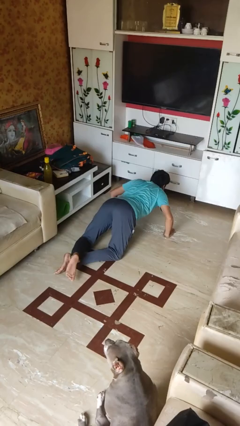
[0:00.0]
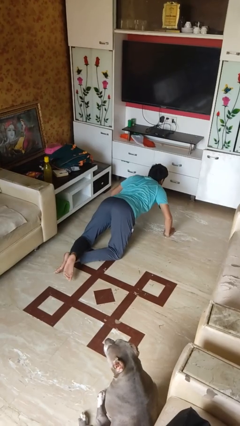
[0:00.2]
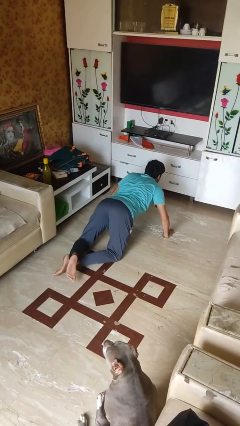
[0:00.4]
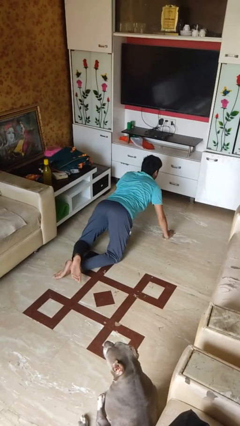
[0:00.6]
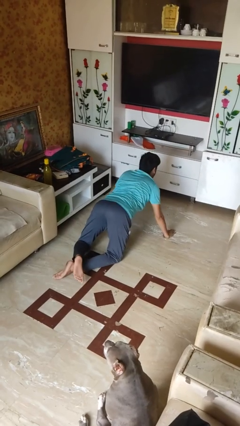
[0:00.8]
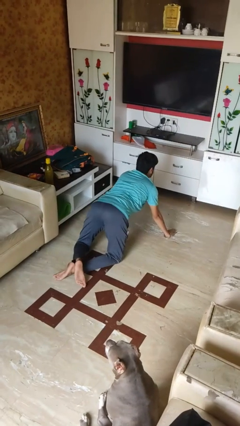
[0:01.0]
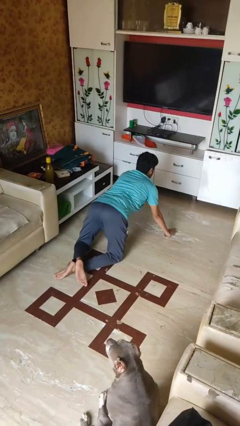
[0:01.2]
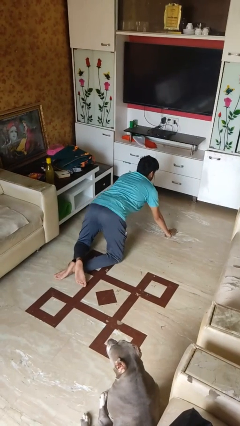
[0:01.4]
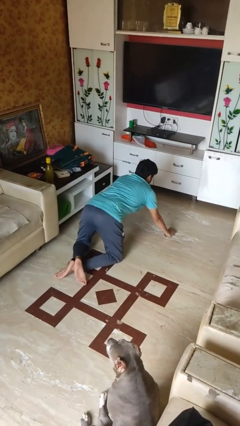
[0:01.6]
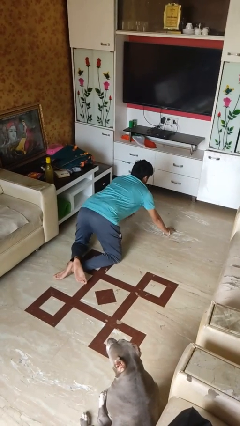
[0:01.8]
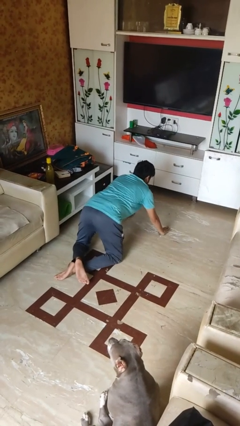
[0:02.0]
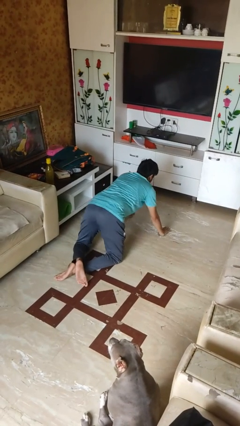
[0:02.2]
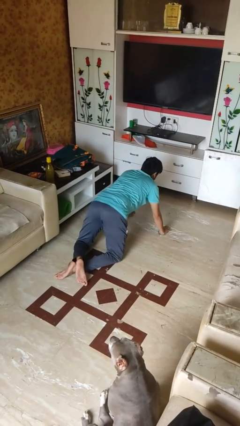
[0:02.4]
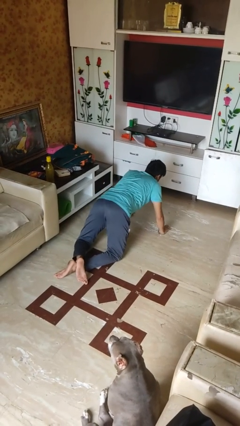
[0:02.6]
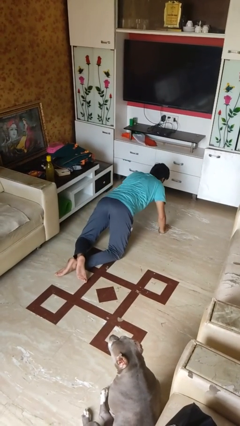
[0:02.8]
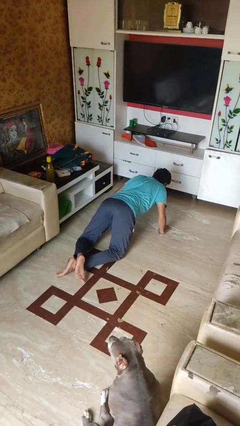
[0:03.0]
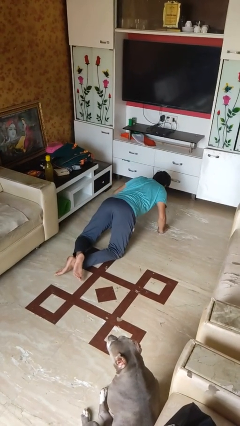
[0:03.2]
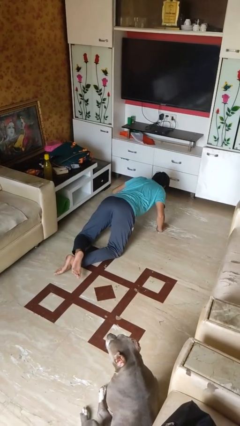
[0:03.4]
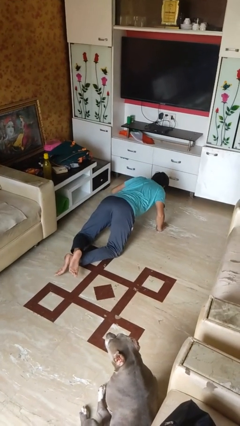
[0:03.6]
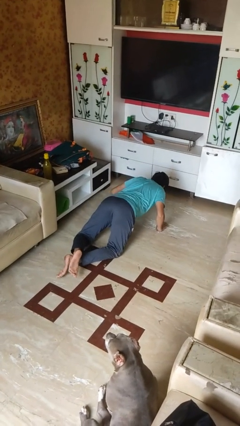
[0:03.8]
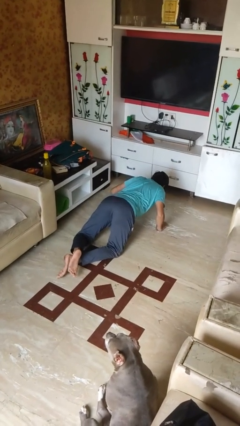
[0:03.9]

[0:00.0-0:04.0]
person exercises with pushup

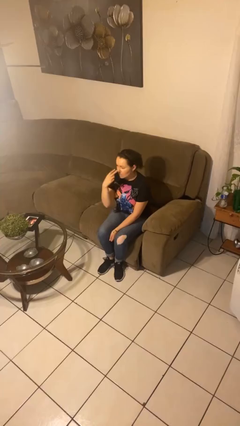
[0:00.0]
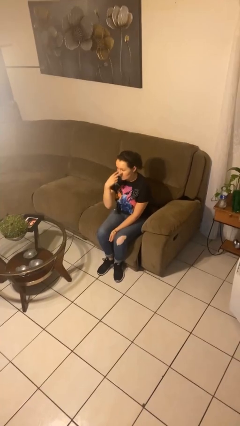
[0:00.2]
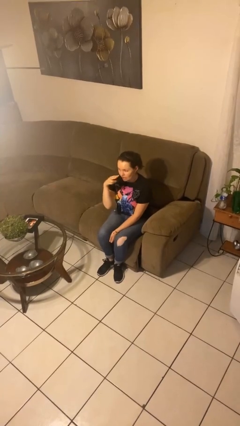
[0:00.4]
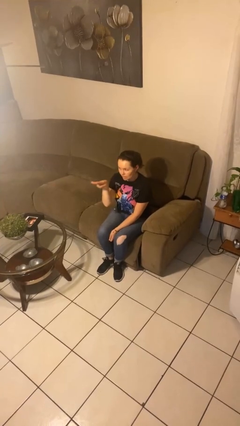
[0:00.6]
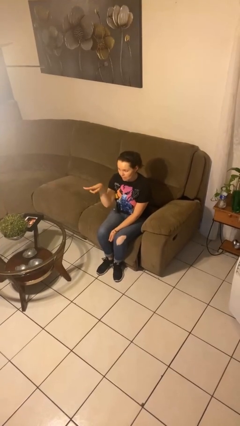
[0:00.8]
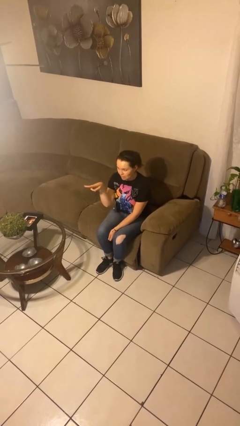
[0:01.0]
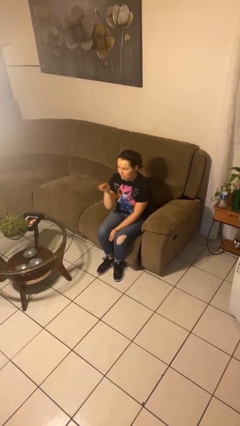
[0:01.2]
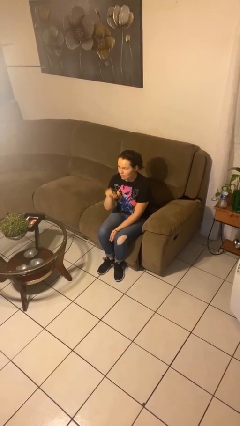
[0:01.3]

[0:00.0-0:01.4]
person gestures watch closely

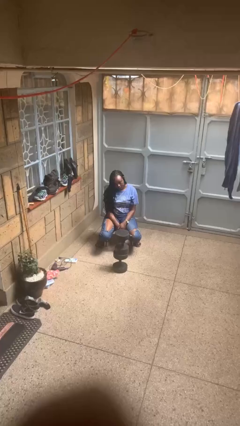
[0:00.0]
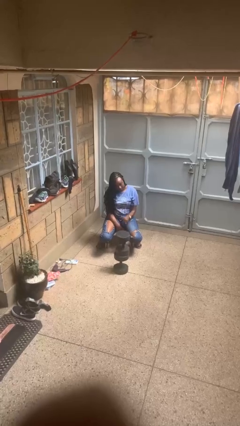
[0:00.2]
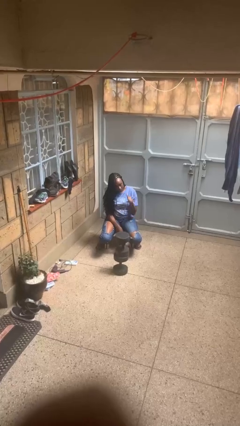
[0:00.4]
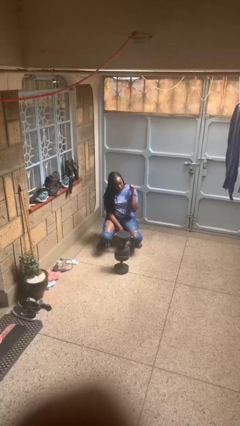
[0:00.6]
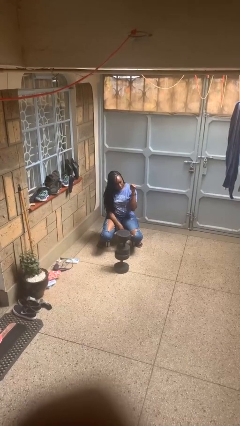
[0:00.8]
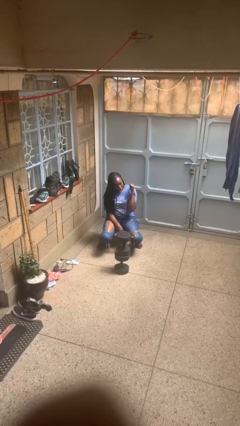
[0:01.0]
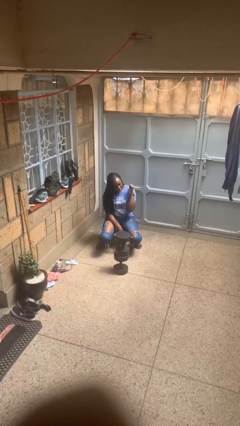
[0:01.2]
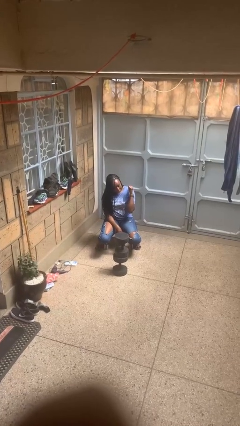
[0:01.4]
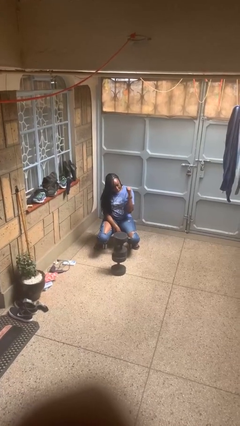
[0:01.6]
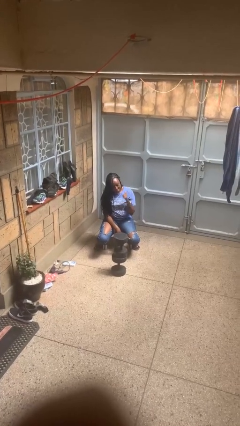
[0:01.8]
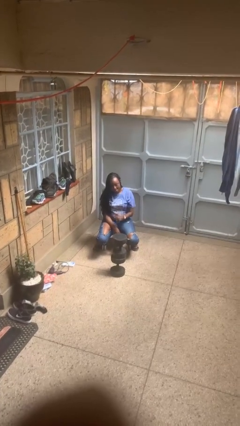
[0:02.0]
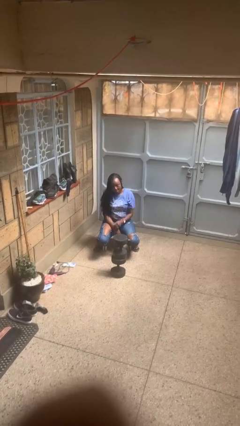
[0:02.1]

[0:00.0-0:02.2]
person gestures behind me

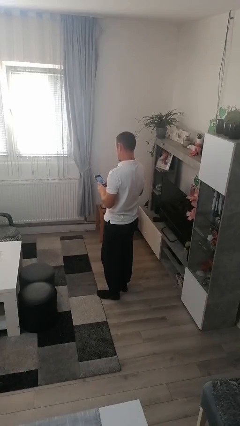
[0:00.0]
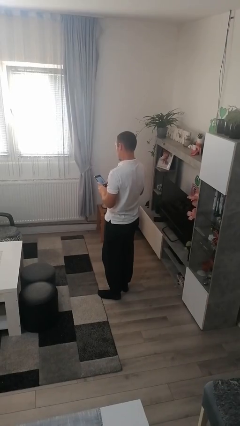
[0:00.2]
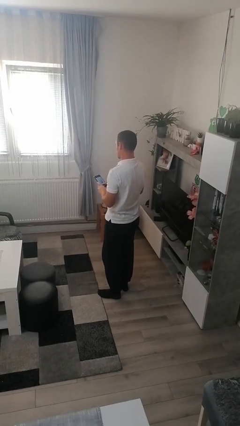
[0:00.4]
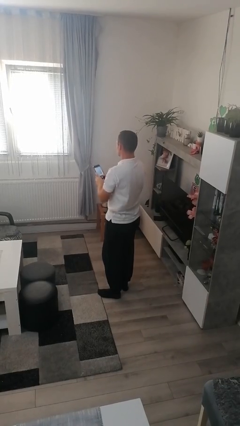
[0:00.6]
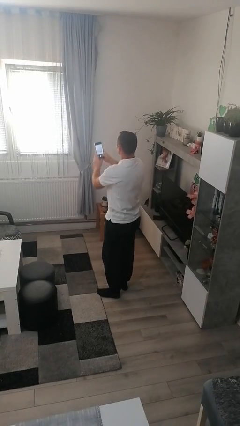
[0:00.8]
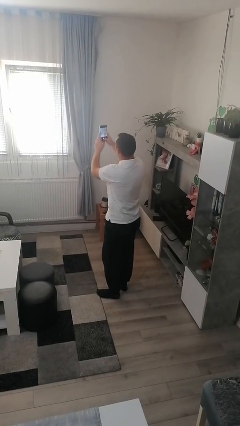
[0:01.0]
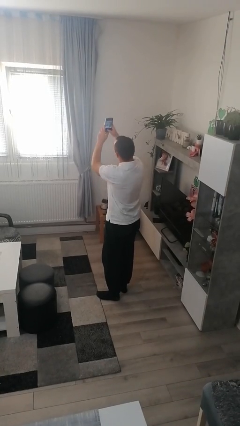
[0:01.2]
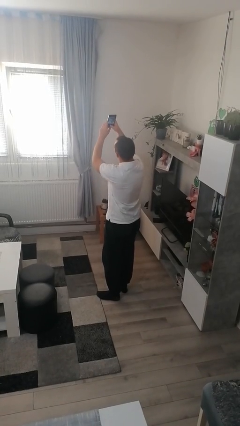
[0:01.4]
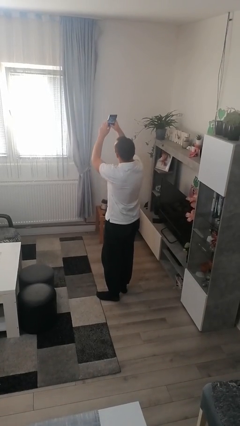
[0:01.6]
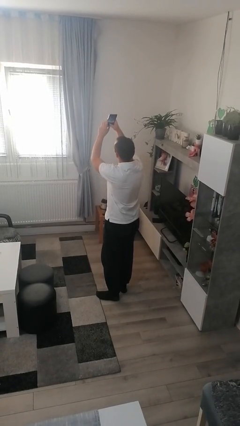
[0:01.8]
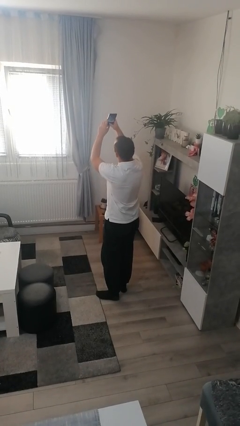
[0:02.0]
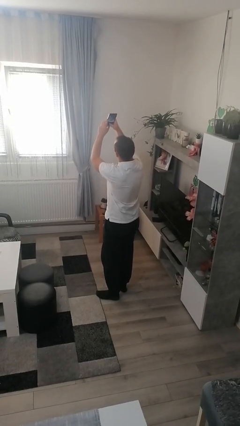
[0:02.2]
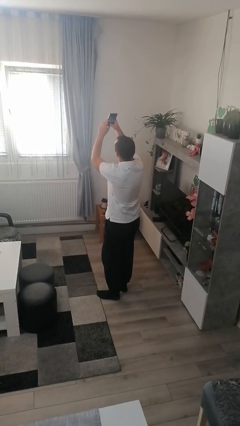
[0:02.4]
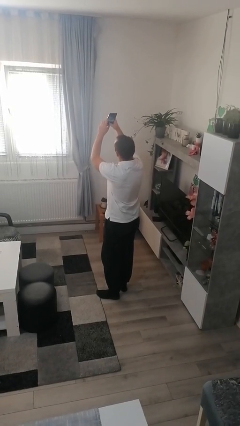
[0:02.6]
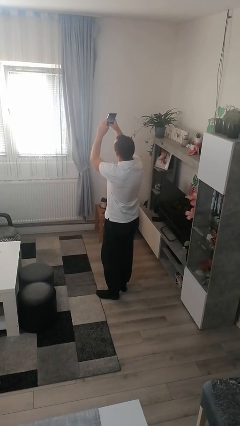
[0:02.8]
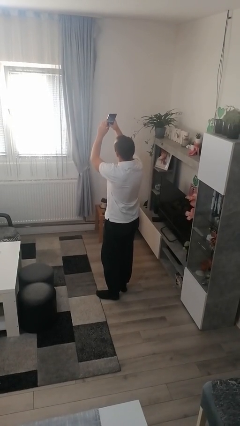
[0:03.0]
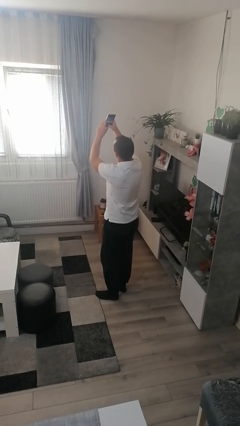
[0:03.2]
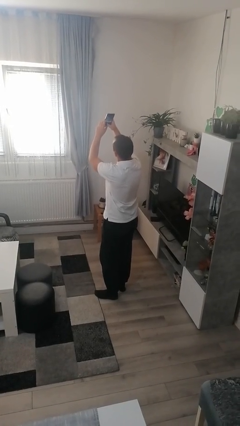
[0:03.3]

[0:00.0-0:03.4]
person takes selfie

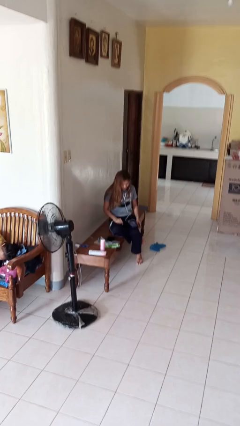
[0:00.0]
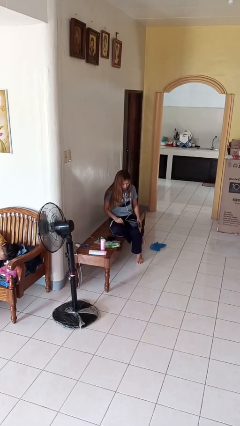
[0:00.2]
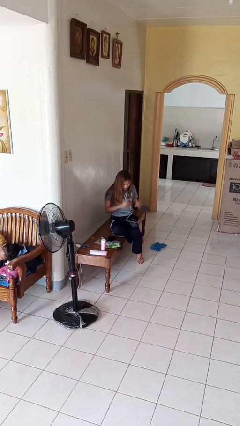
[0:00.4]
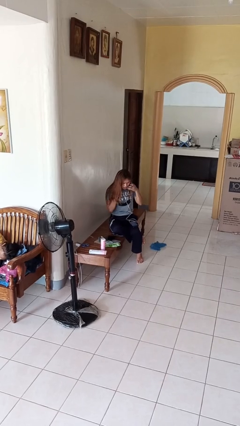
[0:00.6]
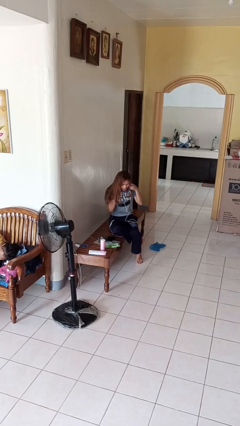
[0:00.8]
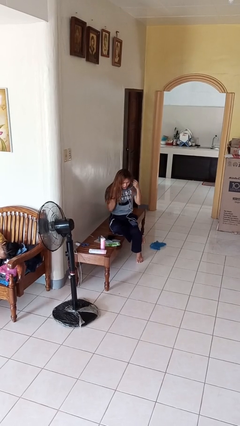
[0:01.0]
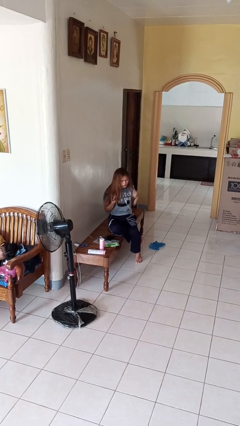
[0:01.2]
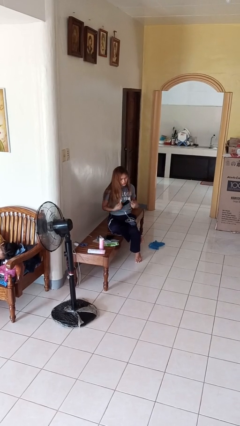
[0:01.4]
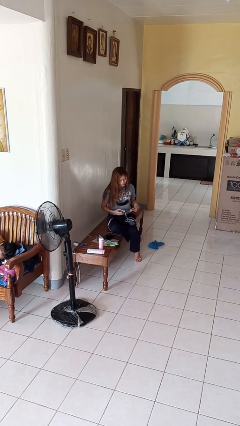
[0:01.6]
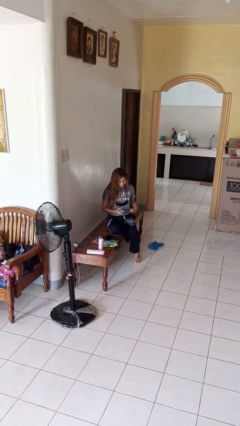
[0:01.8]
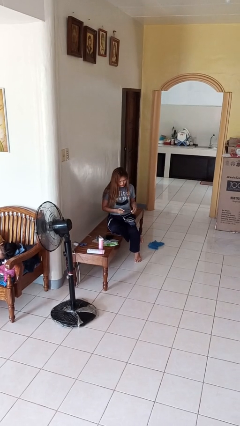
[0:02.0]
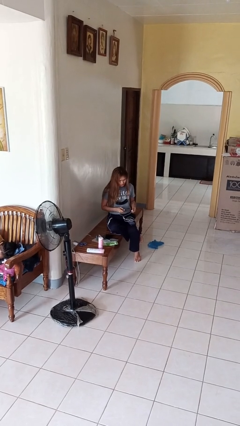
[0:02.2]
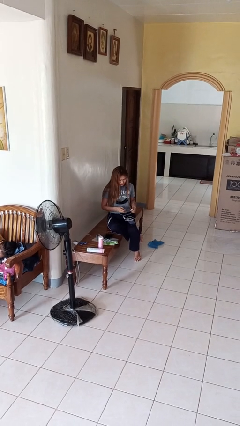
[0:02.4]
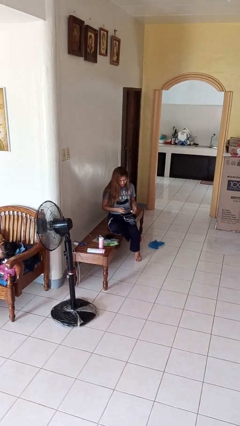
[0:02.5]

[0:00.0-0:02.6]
person takes off headphones

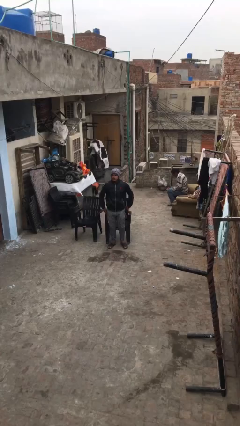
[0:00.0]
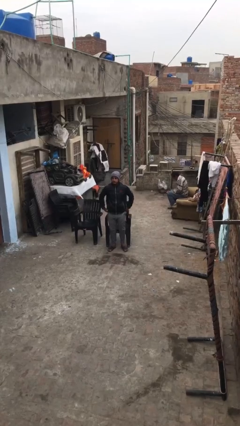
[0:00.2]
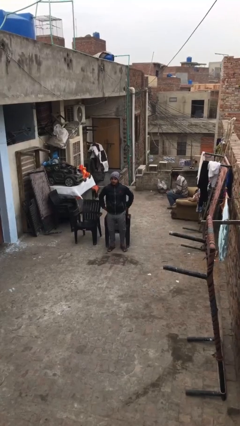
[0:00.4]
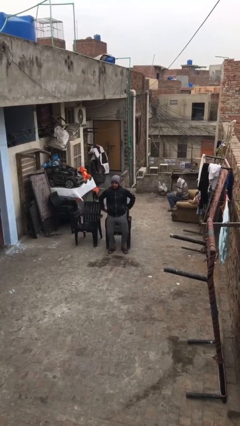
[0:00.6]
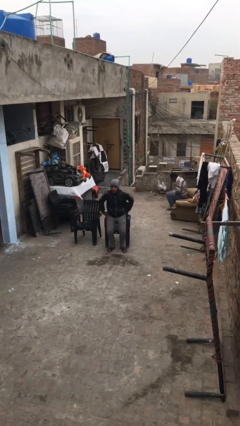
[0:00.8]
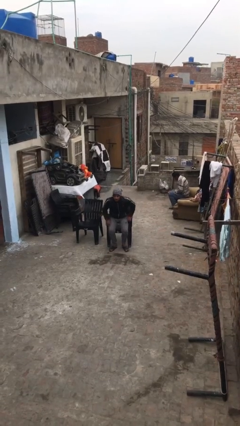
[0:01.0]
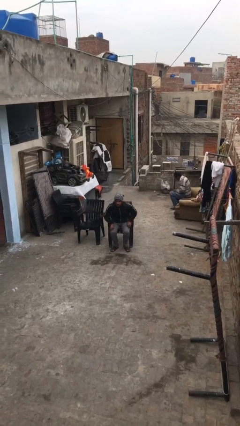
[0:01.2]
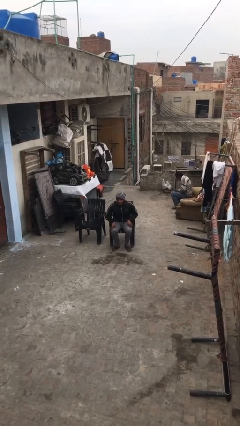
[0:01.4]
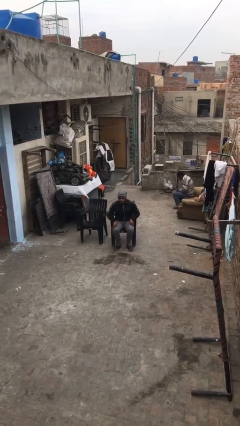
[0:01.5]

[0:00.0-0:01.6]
person sits down

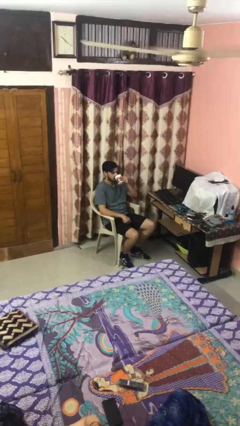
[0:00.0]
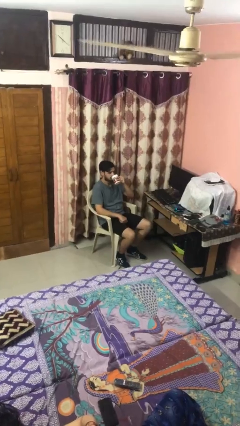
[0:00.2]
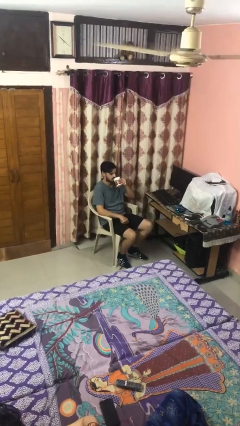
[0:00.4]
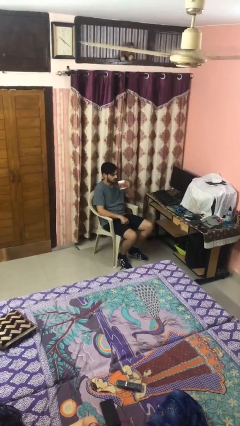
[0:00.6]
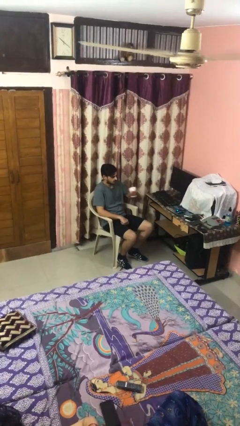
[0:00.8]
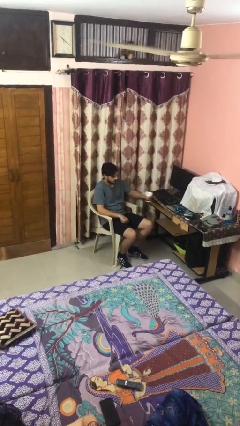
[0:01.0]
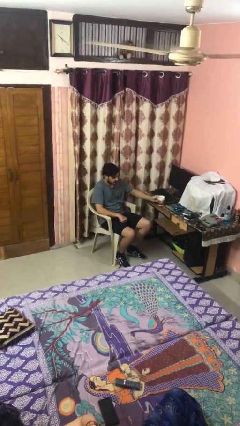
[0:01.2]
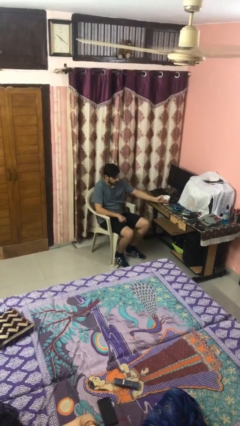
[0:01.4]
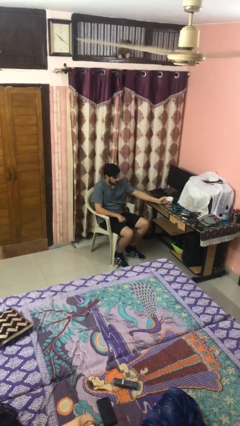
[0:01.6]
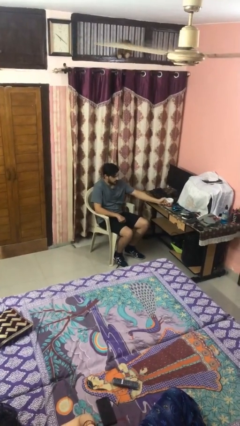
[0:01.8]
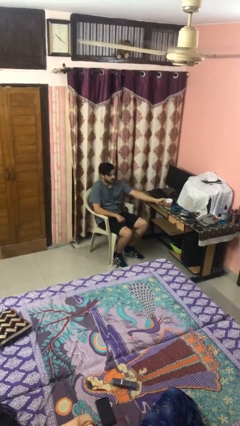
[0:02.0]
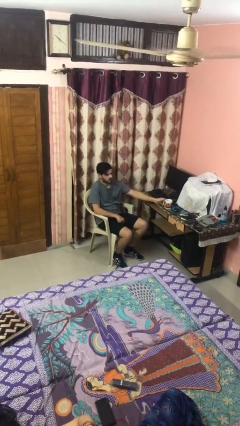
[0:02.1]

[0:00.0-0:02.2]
person puts down object on table
